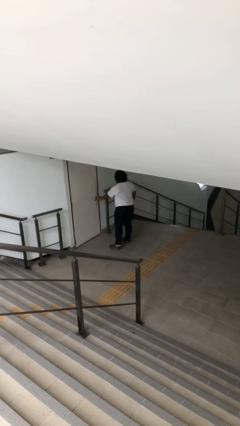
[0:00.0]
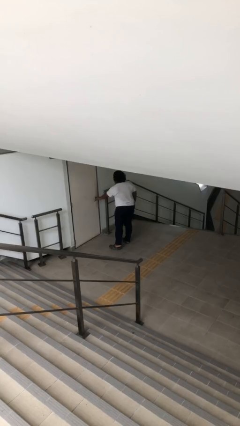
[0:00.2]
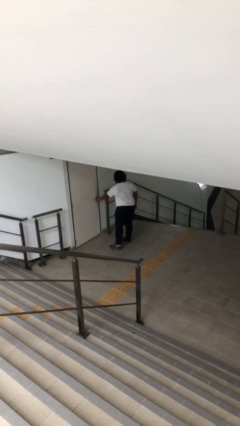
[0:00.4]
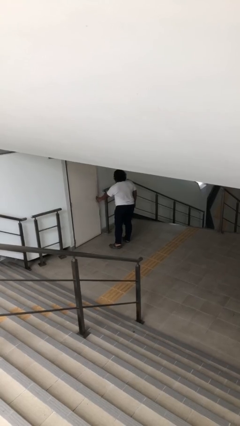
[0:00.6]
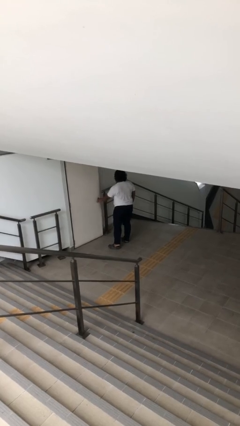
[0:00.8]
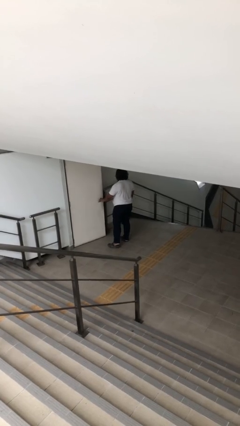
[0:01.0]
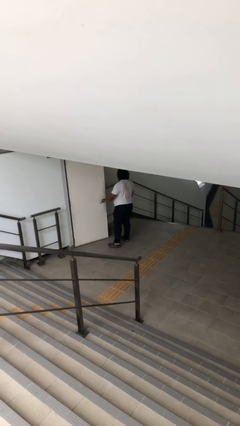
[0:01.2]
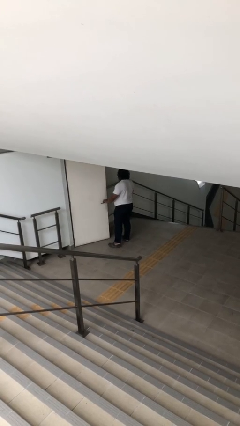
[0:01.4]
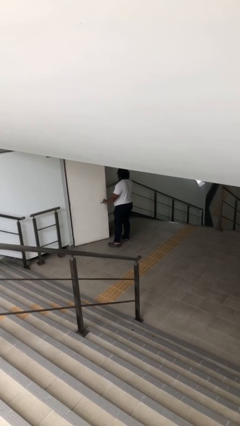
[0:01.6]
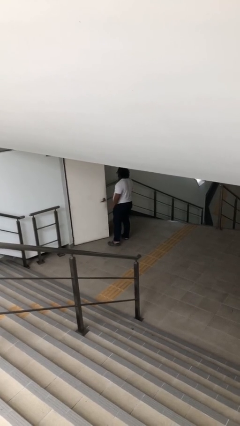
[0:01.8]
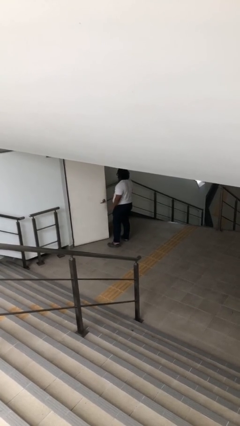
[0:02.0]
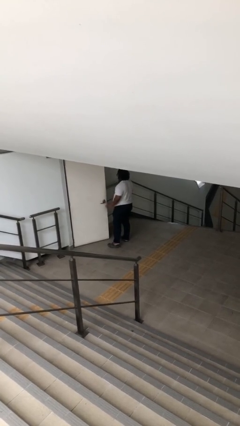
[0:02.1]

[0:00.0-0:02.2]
person opens facility door

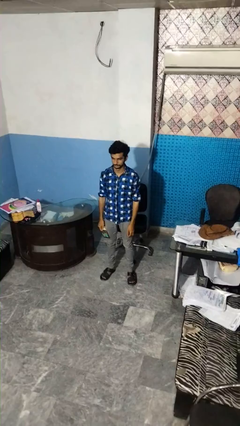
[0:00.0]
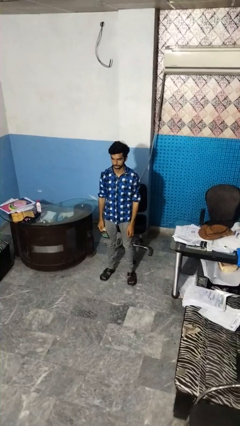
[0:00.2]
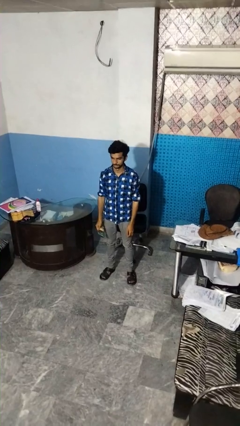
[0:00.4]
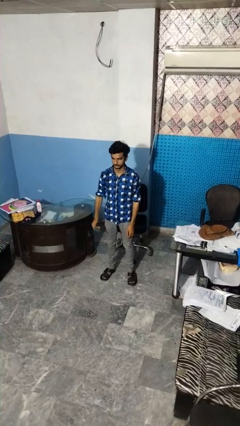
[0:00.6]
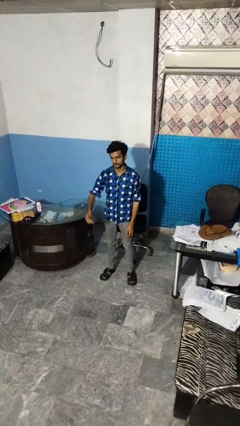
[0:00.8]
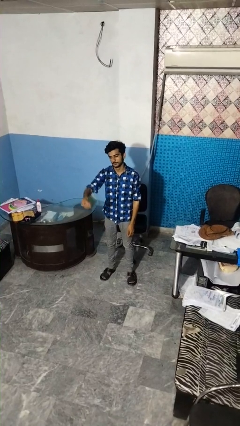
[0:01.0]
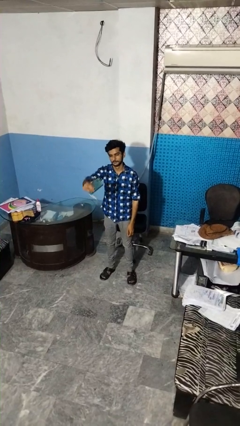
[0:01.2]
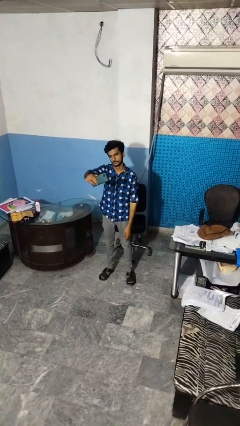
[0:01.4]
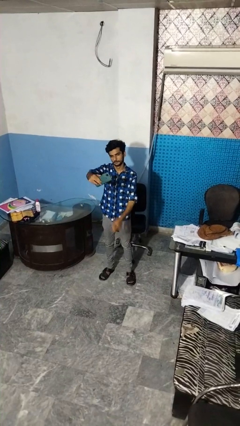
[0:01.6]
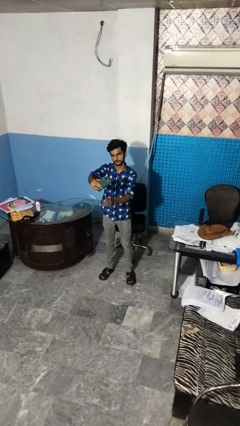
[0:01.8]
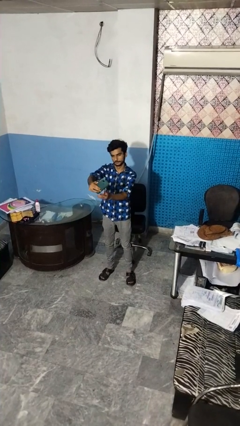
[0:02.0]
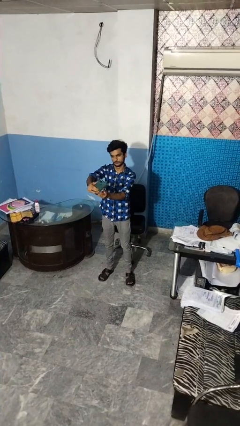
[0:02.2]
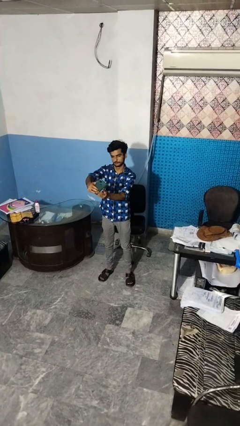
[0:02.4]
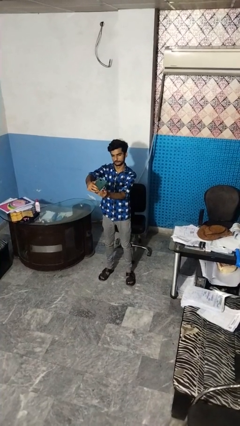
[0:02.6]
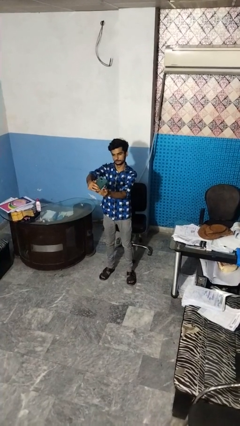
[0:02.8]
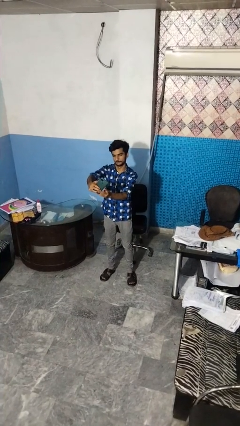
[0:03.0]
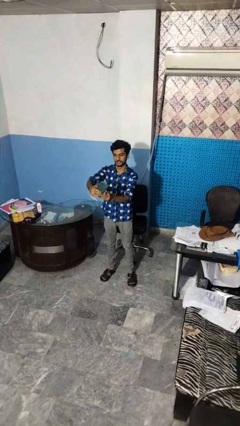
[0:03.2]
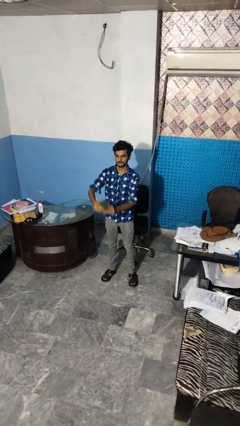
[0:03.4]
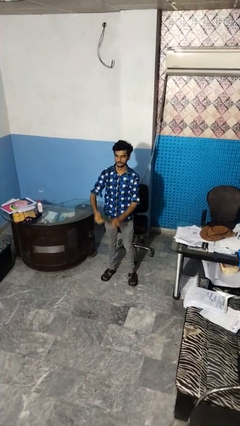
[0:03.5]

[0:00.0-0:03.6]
person takes selfie

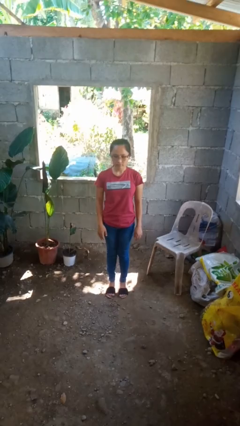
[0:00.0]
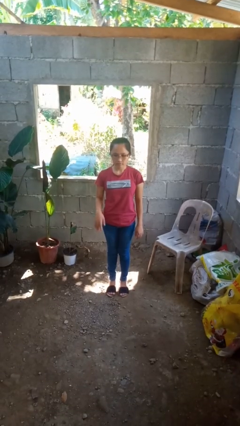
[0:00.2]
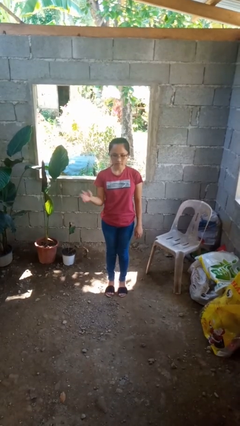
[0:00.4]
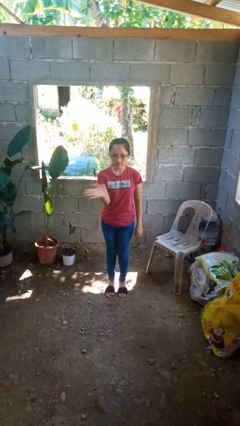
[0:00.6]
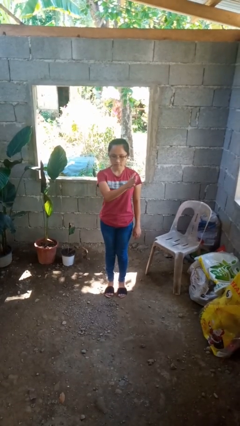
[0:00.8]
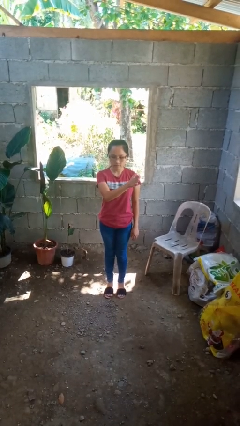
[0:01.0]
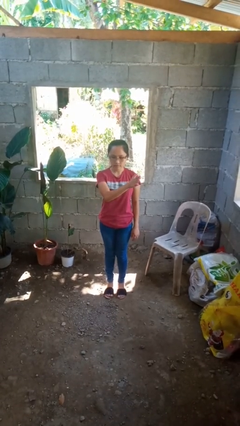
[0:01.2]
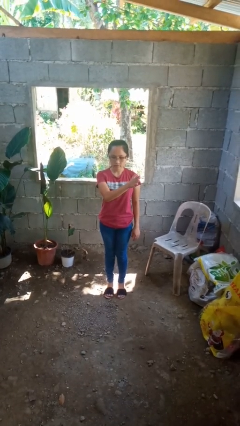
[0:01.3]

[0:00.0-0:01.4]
person gestures swipe left

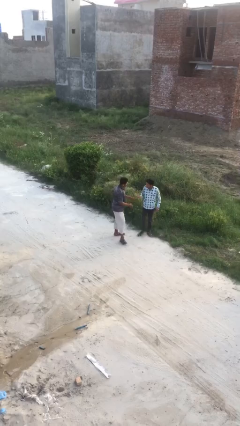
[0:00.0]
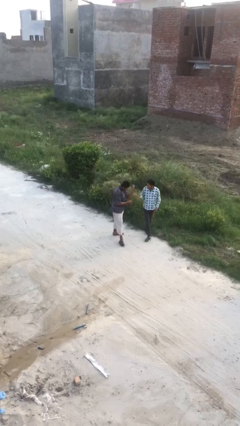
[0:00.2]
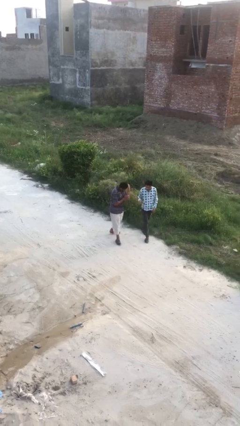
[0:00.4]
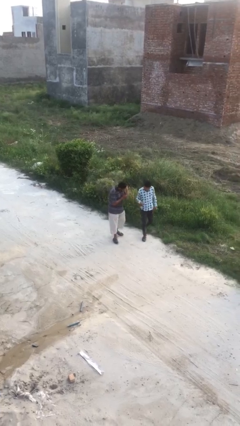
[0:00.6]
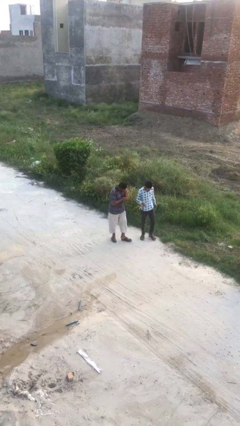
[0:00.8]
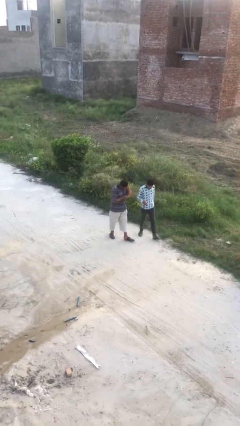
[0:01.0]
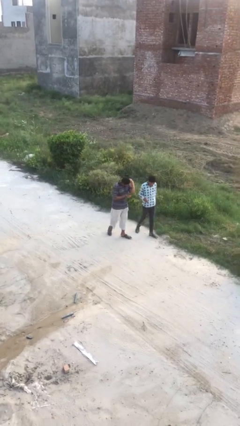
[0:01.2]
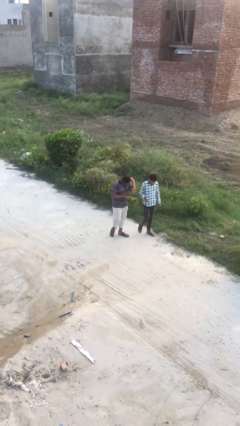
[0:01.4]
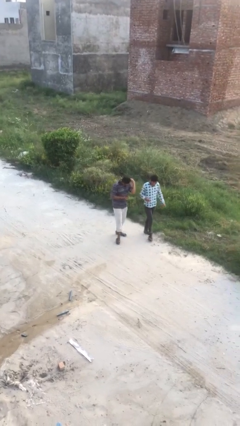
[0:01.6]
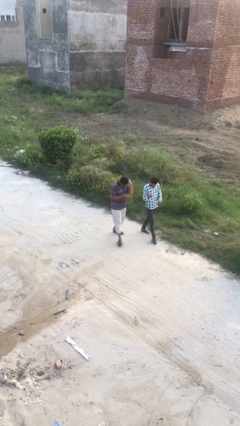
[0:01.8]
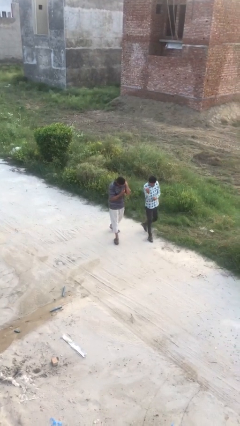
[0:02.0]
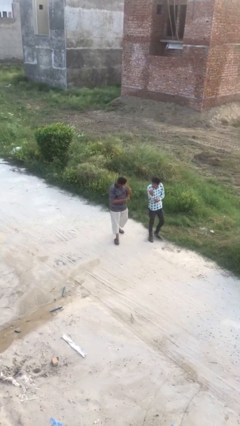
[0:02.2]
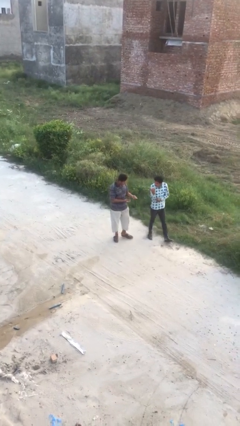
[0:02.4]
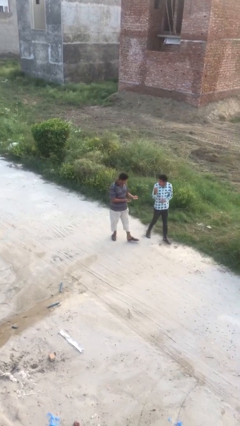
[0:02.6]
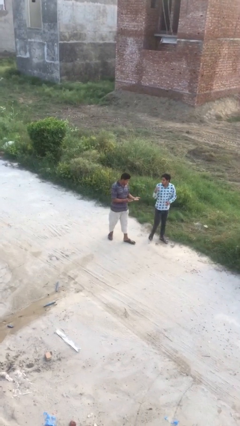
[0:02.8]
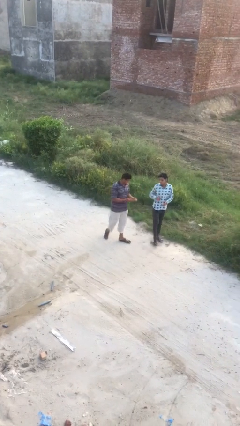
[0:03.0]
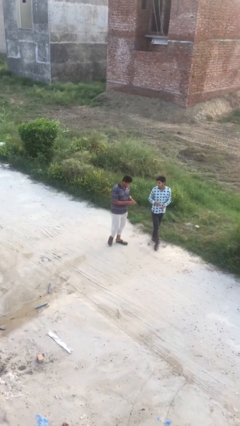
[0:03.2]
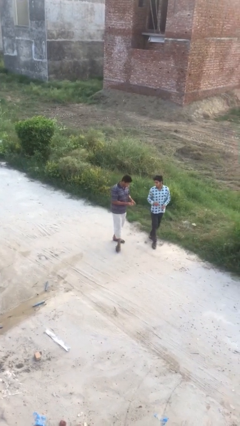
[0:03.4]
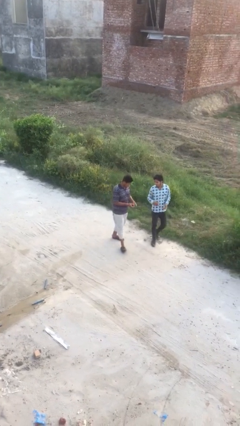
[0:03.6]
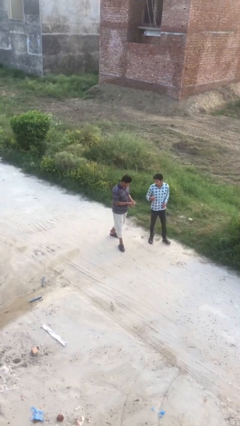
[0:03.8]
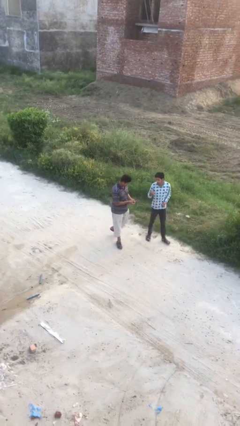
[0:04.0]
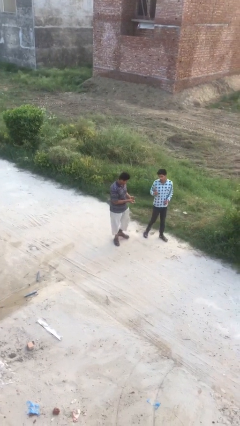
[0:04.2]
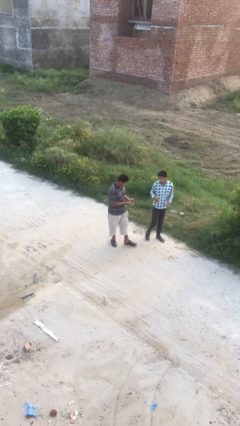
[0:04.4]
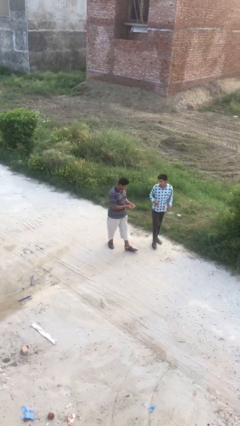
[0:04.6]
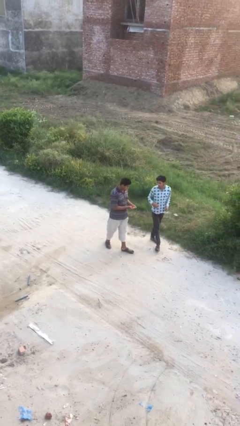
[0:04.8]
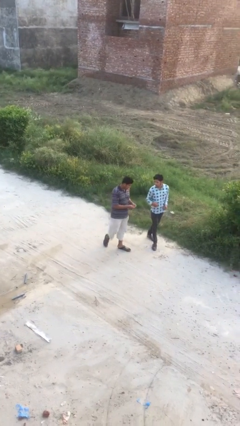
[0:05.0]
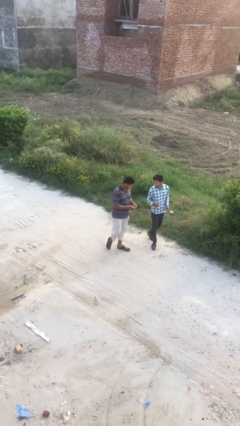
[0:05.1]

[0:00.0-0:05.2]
person talks to person

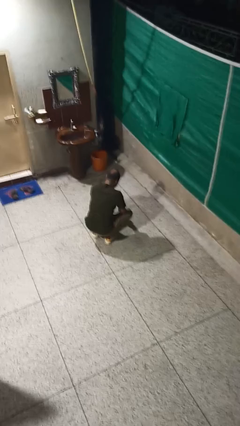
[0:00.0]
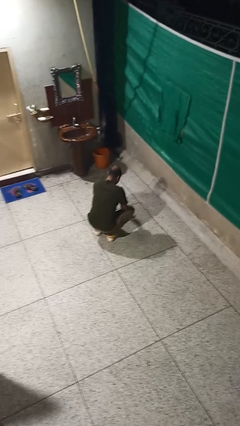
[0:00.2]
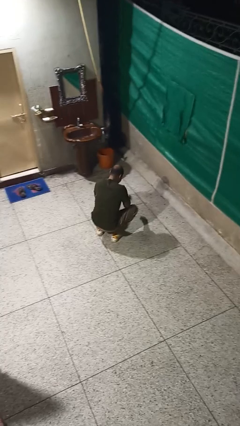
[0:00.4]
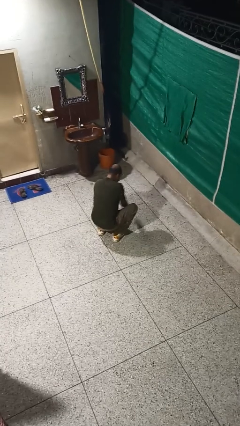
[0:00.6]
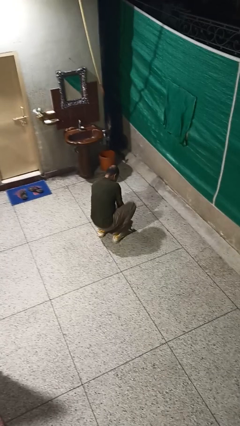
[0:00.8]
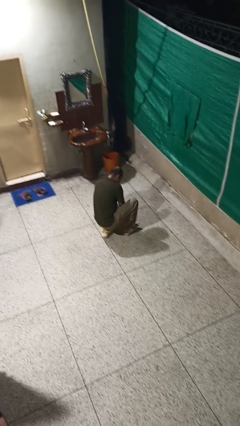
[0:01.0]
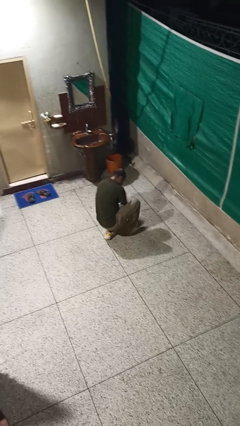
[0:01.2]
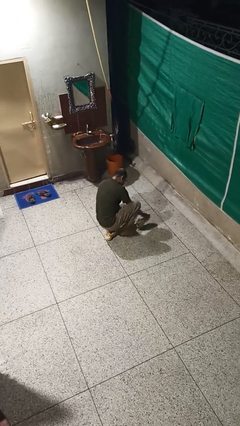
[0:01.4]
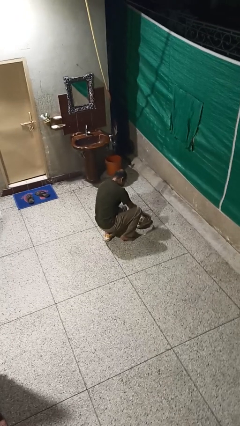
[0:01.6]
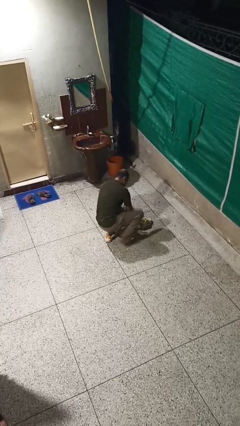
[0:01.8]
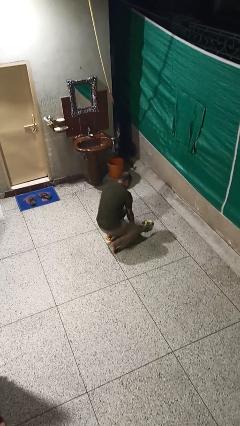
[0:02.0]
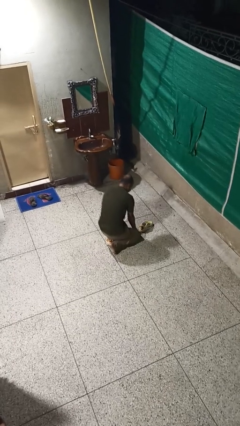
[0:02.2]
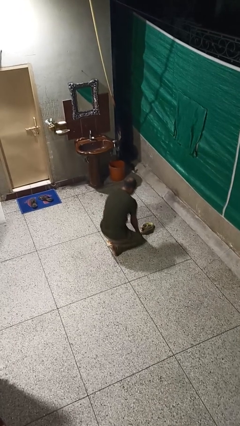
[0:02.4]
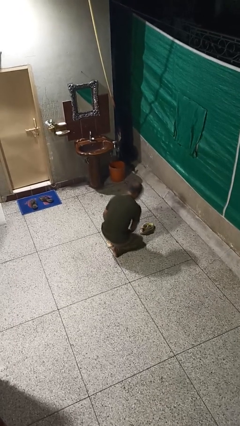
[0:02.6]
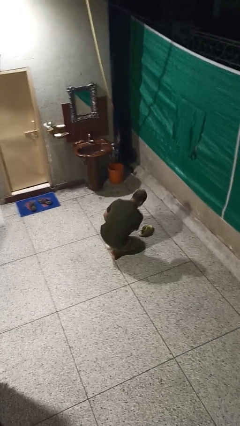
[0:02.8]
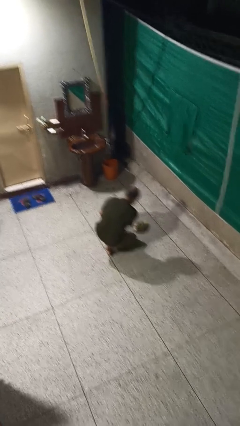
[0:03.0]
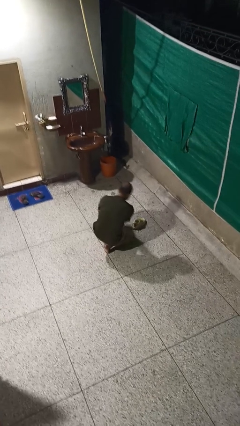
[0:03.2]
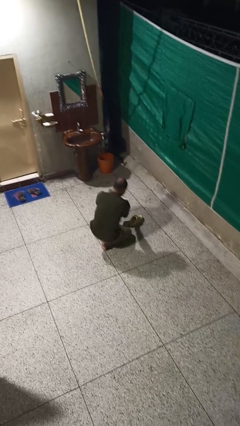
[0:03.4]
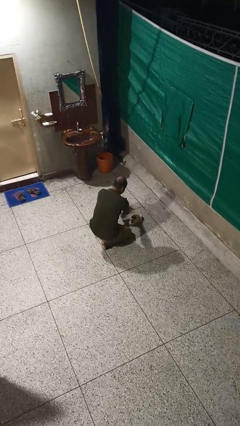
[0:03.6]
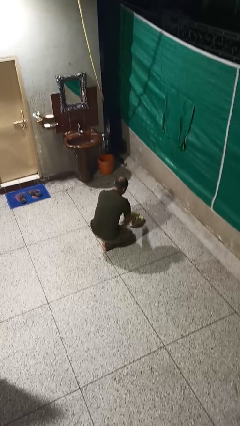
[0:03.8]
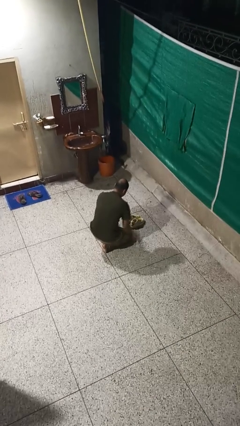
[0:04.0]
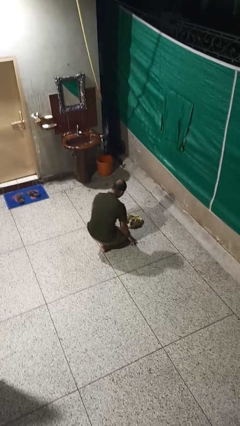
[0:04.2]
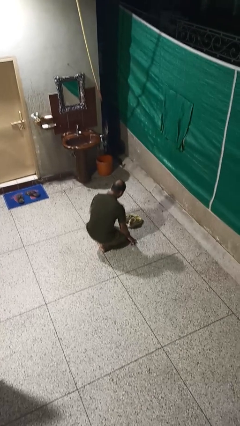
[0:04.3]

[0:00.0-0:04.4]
person takes off shoes

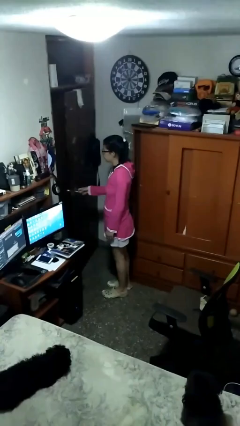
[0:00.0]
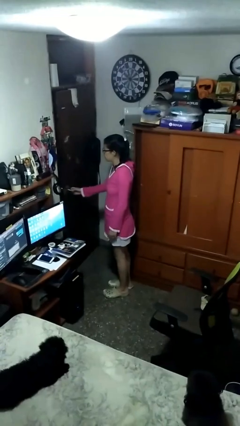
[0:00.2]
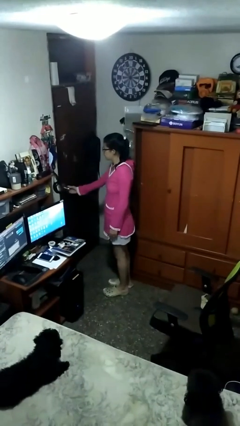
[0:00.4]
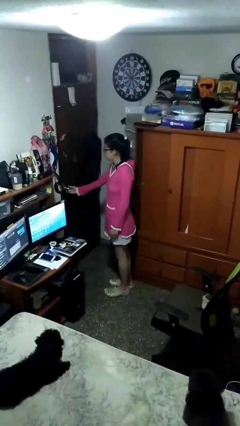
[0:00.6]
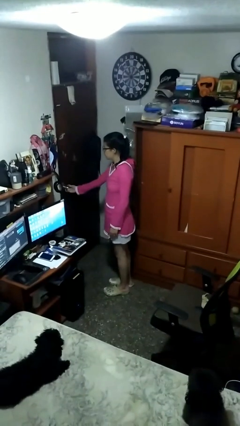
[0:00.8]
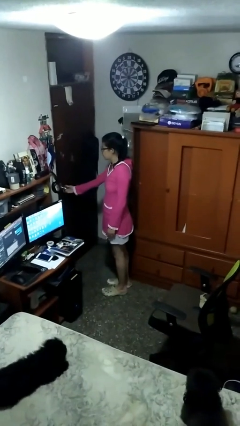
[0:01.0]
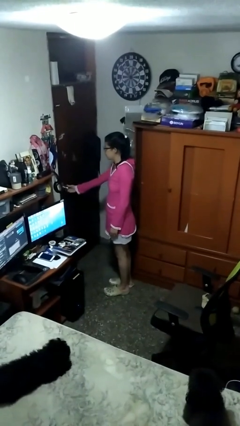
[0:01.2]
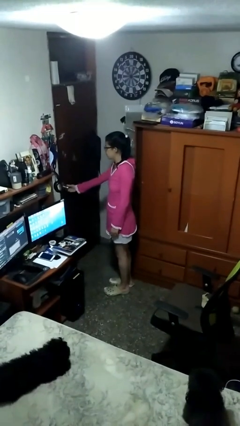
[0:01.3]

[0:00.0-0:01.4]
person closes facility door
